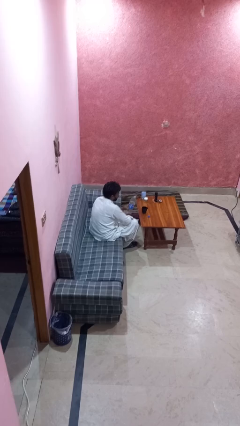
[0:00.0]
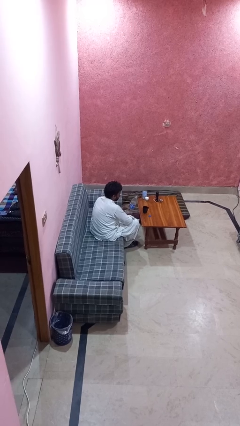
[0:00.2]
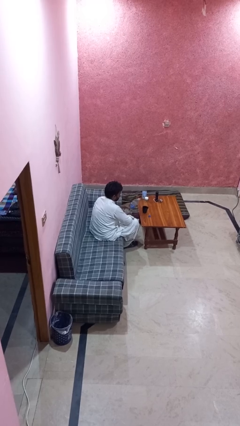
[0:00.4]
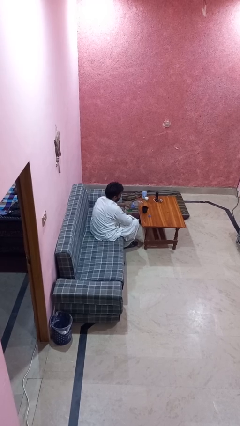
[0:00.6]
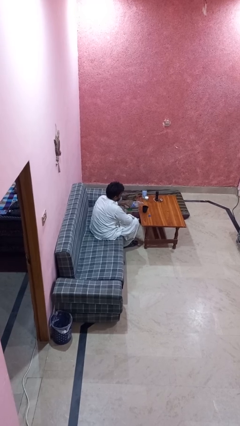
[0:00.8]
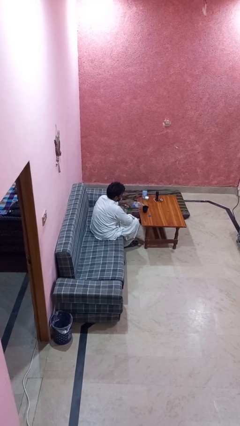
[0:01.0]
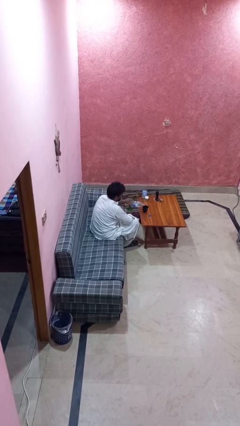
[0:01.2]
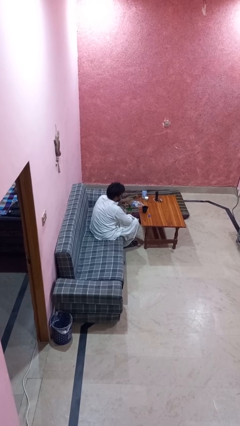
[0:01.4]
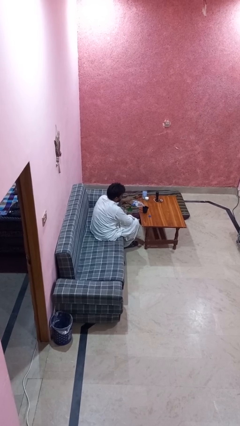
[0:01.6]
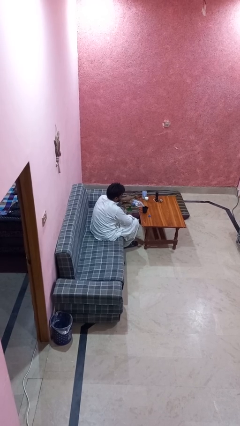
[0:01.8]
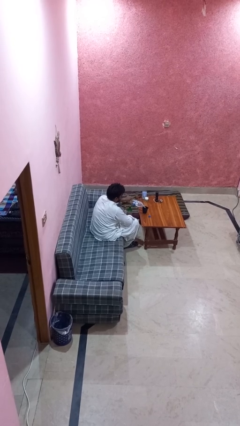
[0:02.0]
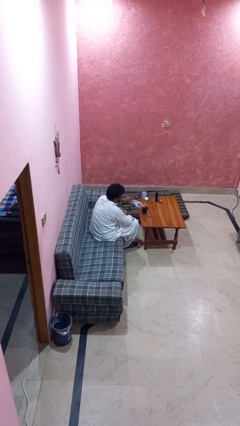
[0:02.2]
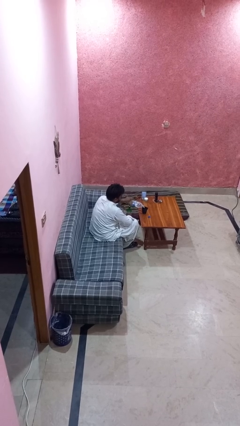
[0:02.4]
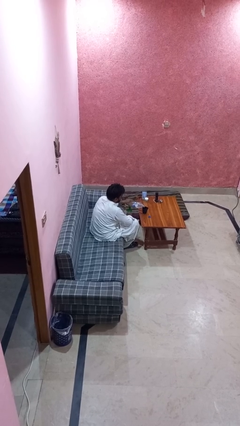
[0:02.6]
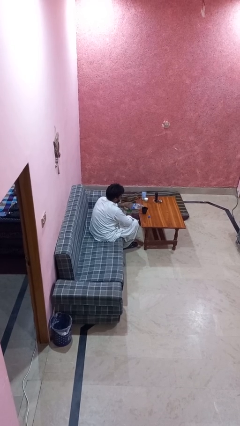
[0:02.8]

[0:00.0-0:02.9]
person pours liquid into cup

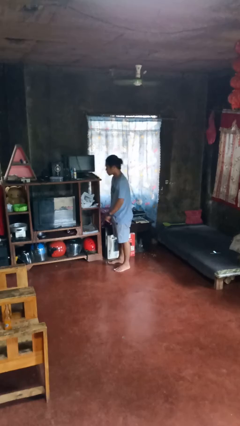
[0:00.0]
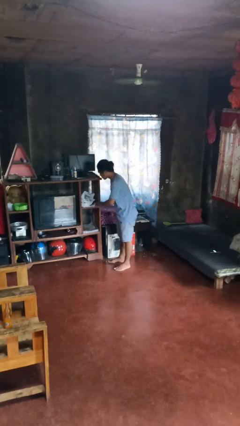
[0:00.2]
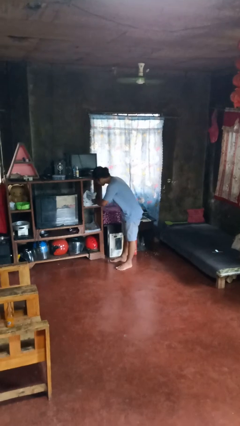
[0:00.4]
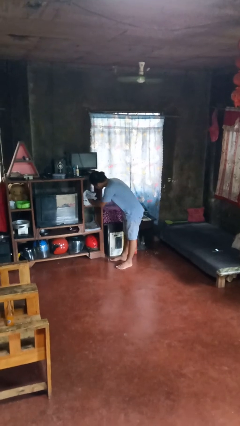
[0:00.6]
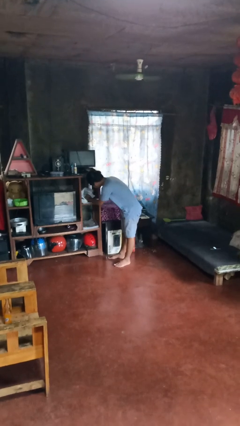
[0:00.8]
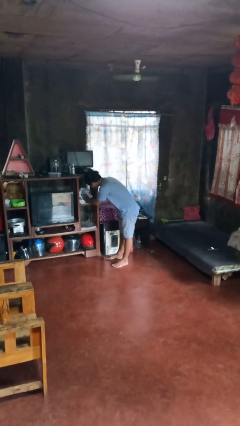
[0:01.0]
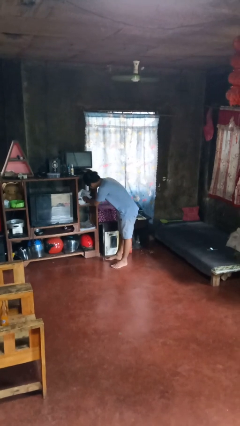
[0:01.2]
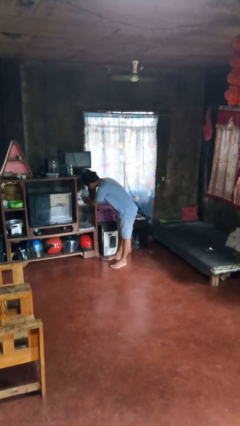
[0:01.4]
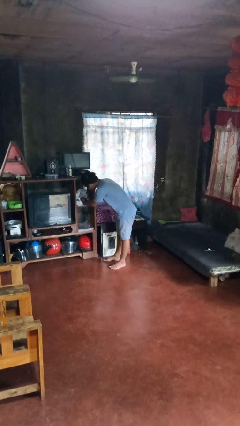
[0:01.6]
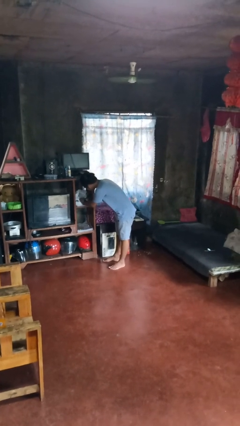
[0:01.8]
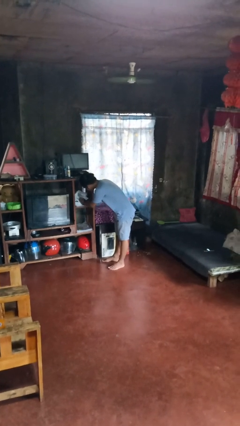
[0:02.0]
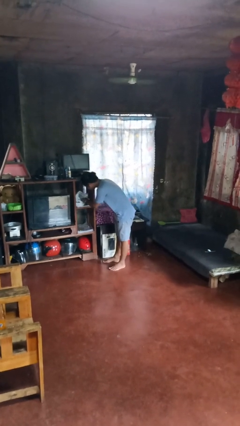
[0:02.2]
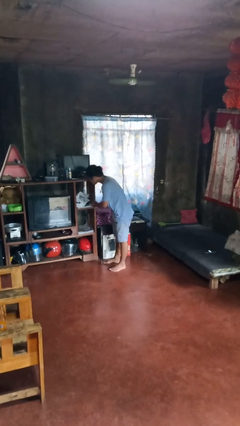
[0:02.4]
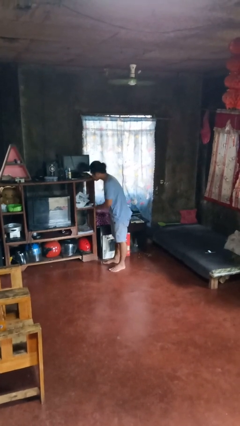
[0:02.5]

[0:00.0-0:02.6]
person searches in cabinet

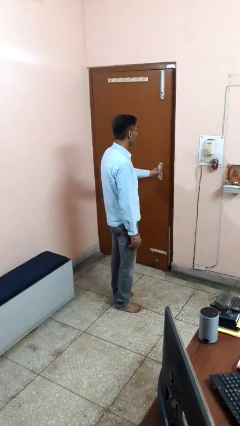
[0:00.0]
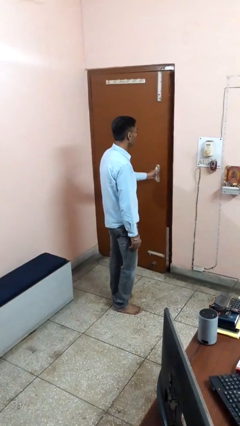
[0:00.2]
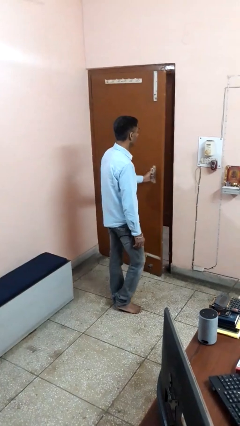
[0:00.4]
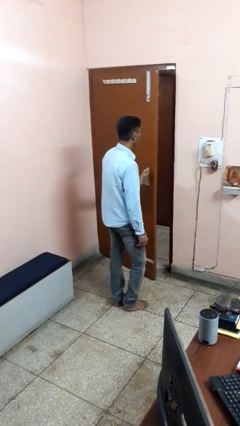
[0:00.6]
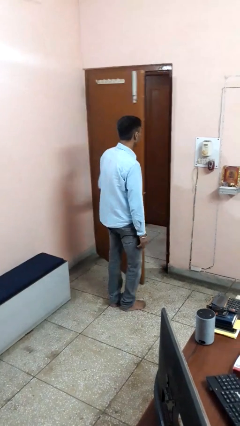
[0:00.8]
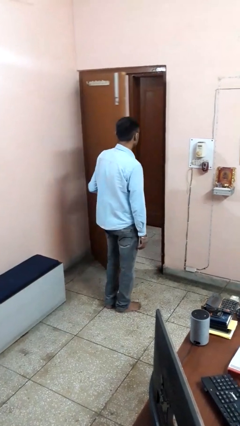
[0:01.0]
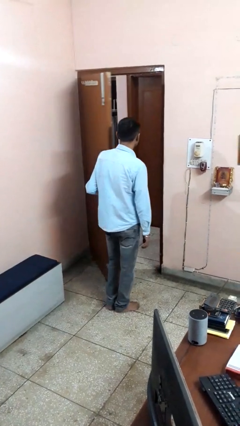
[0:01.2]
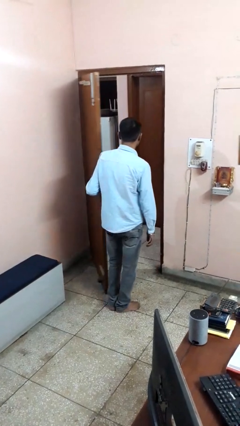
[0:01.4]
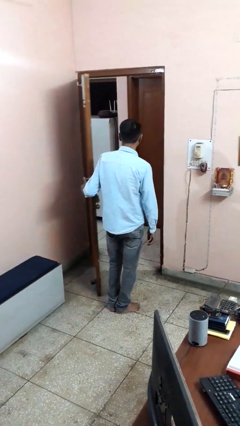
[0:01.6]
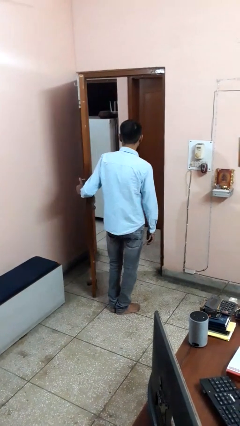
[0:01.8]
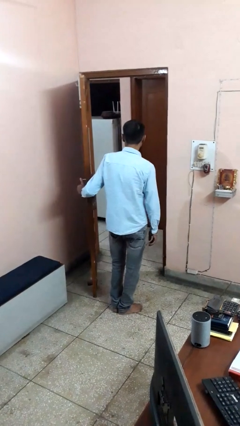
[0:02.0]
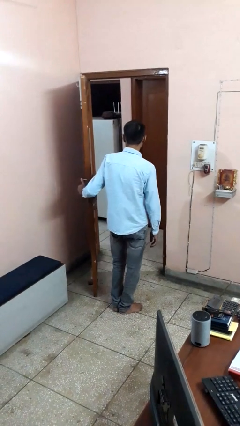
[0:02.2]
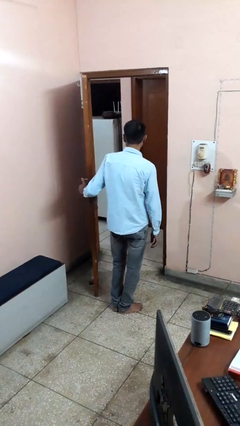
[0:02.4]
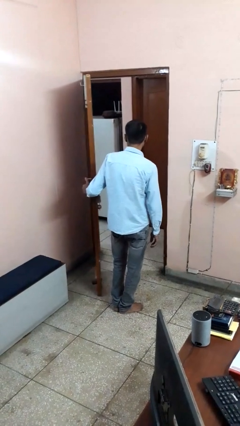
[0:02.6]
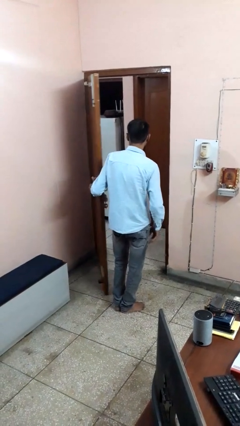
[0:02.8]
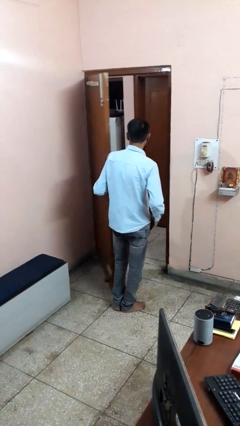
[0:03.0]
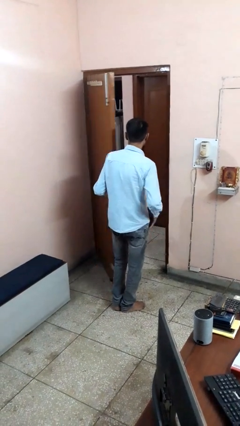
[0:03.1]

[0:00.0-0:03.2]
person opens facility door

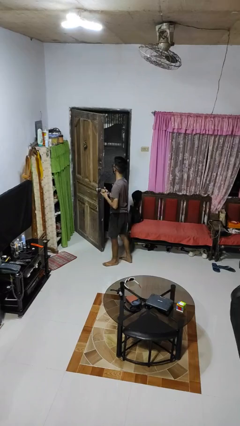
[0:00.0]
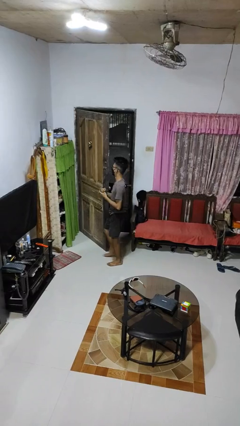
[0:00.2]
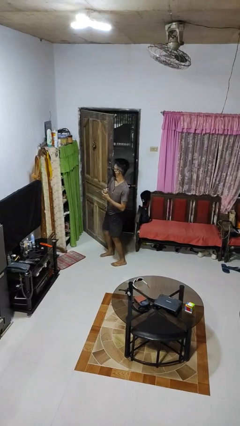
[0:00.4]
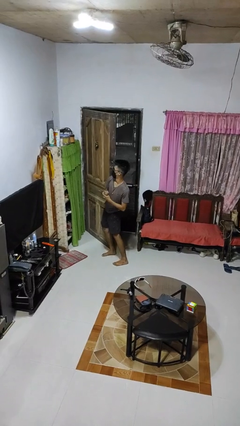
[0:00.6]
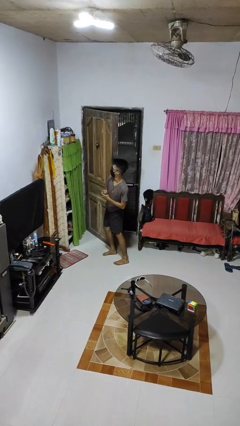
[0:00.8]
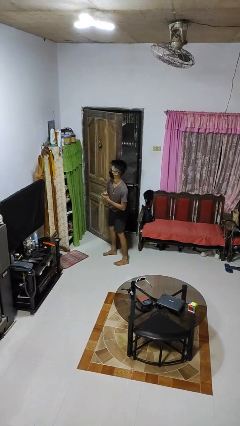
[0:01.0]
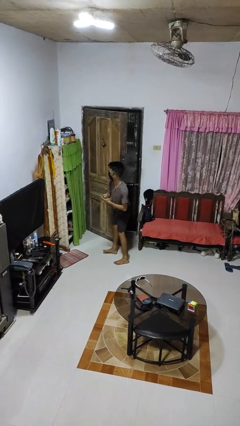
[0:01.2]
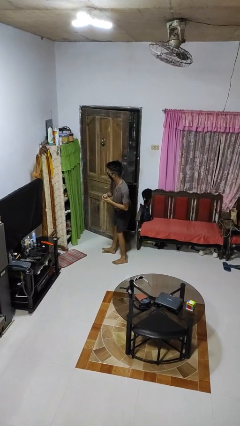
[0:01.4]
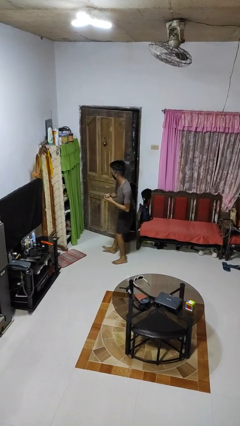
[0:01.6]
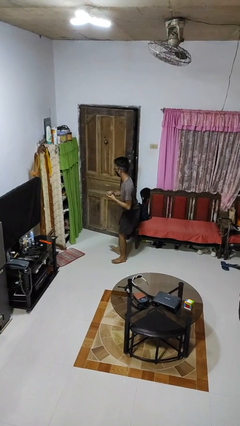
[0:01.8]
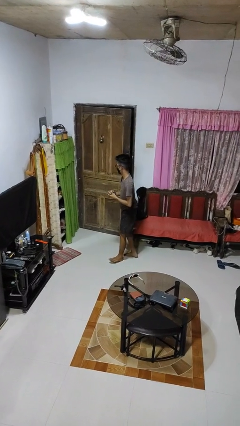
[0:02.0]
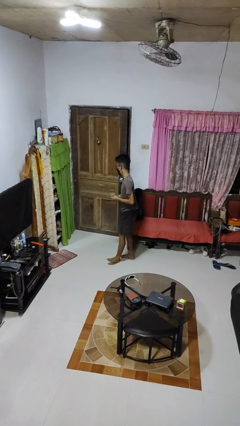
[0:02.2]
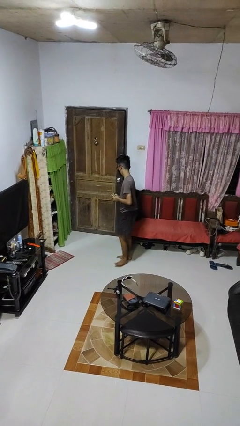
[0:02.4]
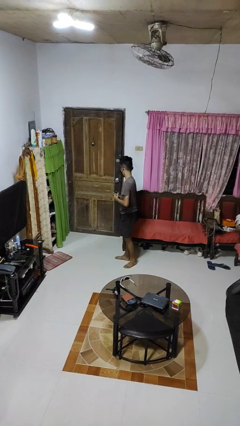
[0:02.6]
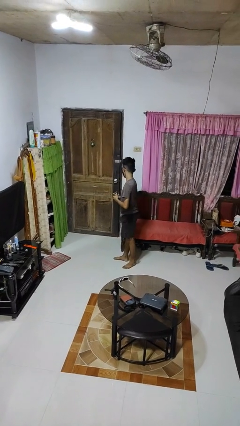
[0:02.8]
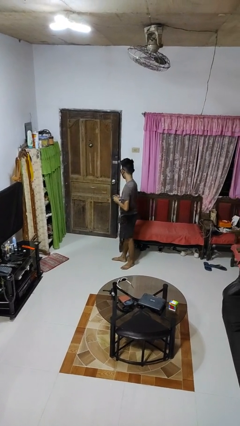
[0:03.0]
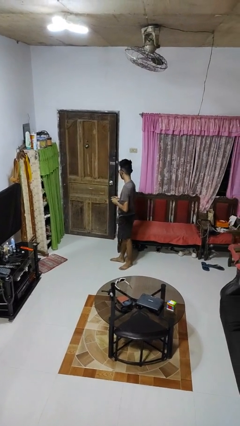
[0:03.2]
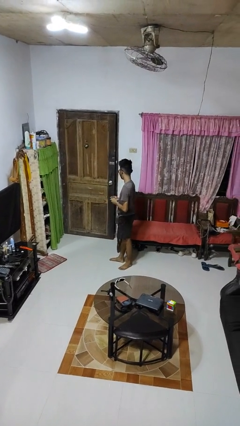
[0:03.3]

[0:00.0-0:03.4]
person closes door with hip

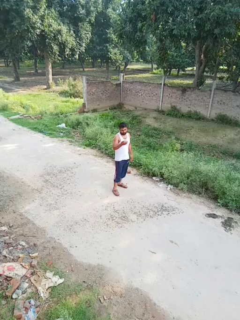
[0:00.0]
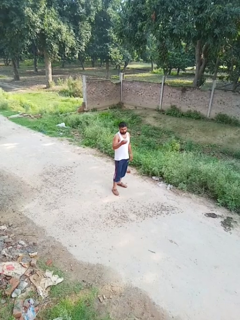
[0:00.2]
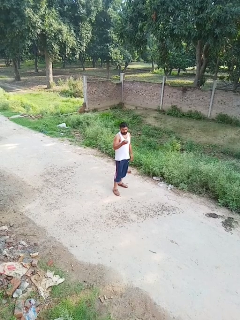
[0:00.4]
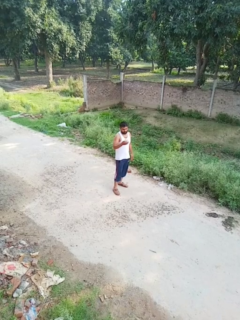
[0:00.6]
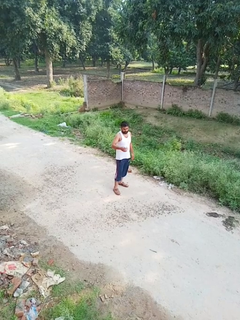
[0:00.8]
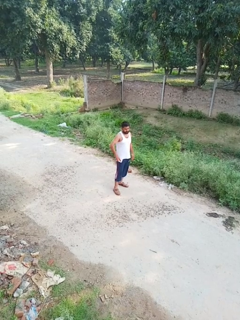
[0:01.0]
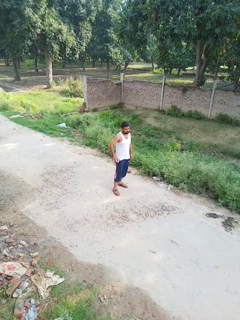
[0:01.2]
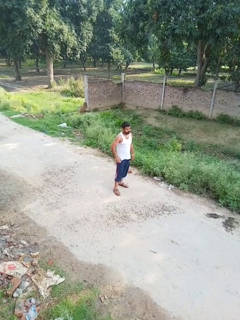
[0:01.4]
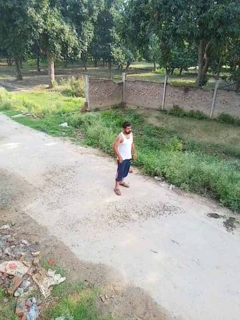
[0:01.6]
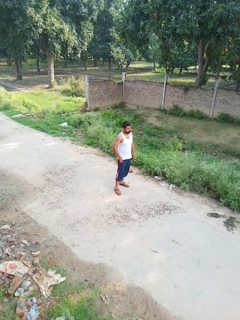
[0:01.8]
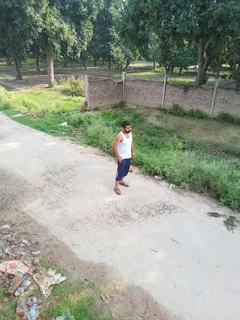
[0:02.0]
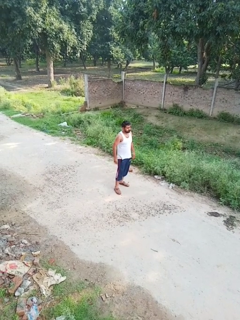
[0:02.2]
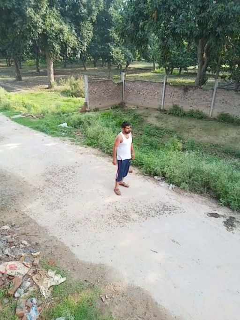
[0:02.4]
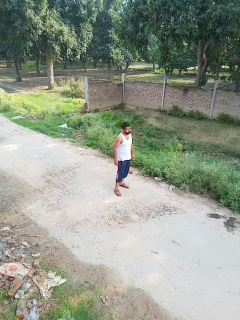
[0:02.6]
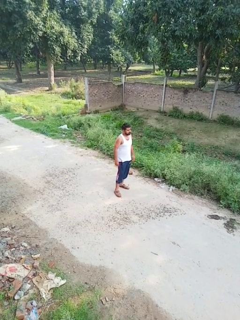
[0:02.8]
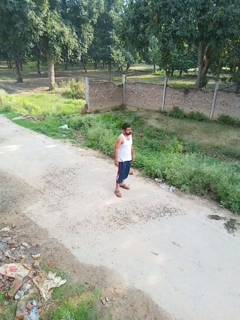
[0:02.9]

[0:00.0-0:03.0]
person puts phone into pocket

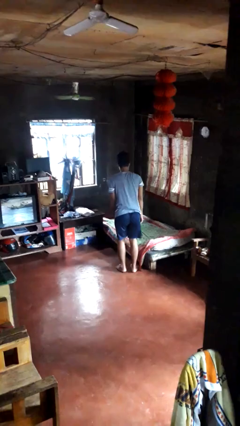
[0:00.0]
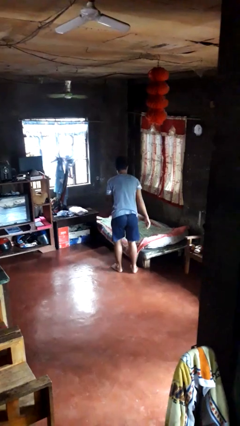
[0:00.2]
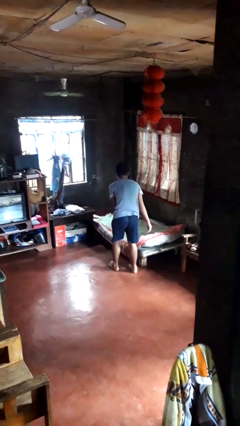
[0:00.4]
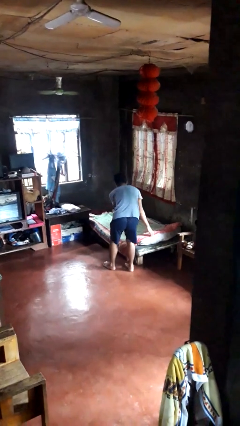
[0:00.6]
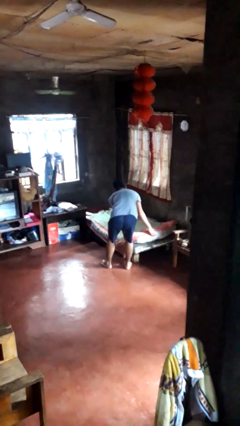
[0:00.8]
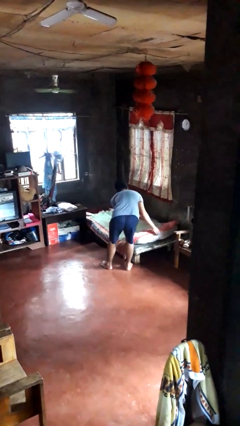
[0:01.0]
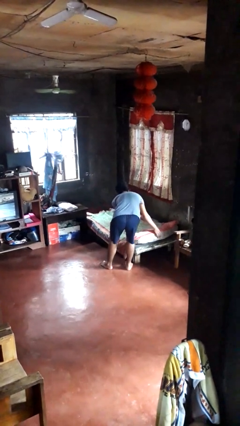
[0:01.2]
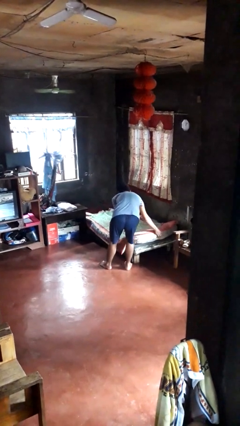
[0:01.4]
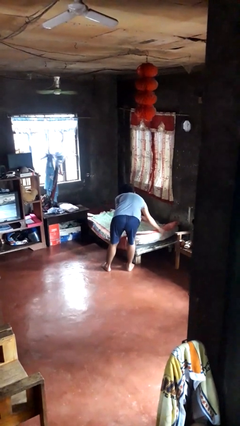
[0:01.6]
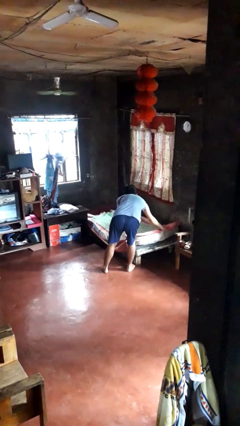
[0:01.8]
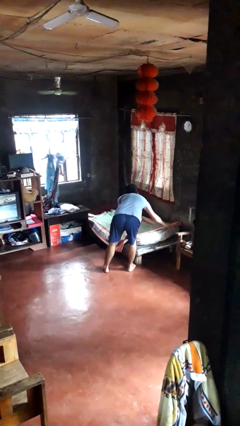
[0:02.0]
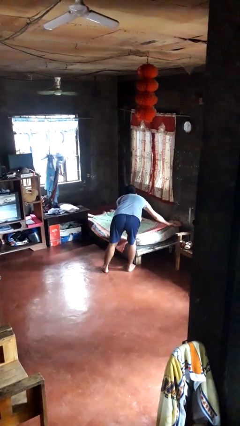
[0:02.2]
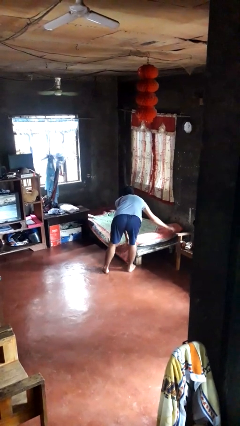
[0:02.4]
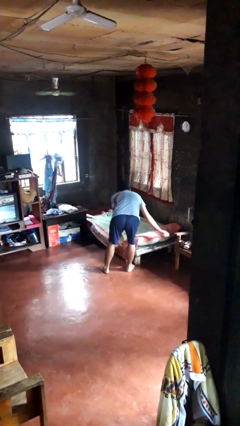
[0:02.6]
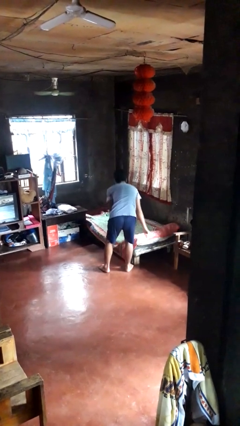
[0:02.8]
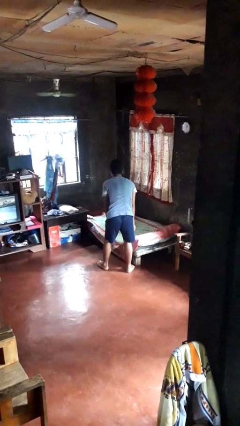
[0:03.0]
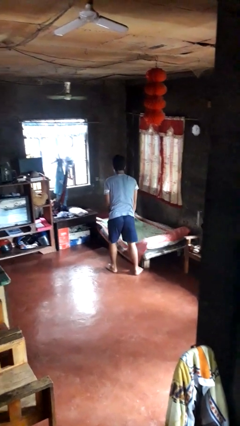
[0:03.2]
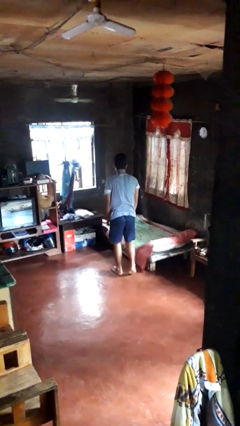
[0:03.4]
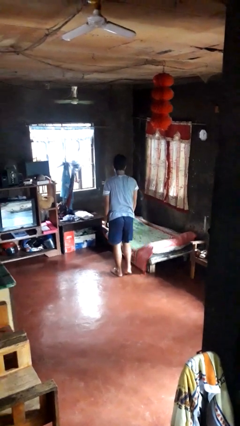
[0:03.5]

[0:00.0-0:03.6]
person makes bed
